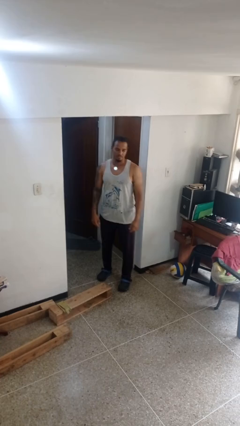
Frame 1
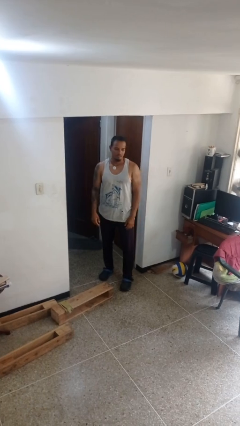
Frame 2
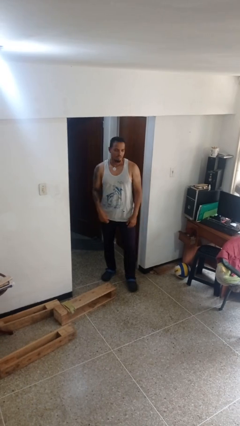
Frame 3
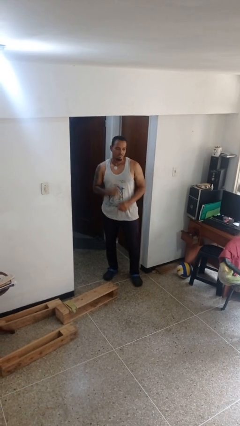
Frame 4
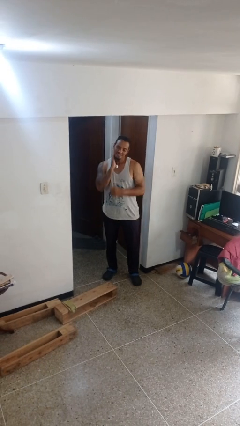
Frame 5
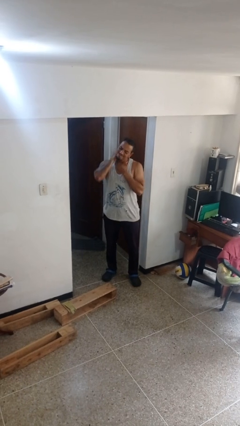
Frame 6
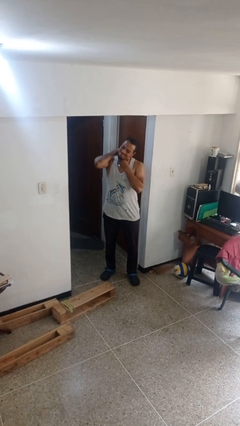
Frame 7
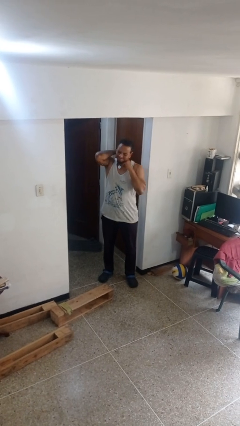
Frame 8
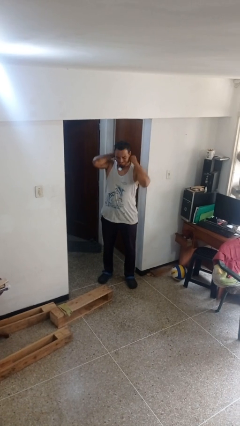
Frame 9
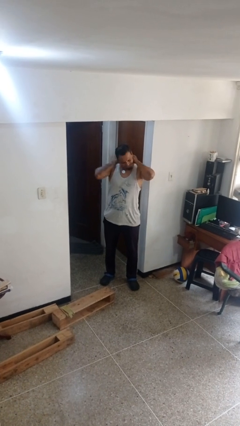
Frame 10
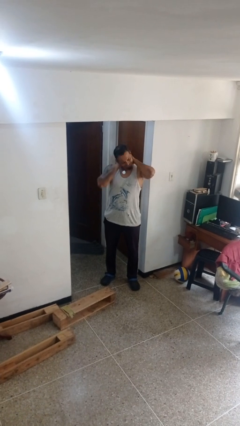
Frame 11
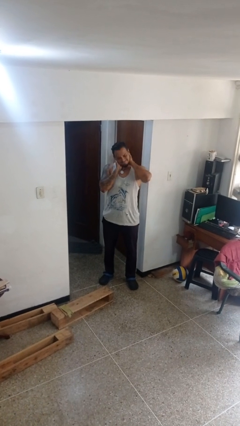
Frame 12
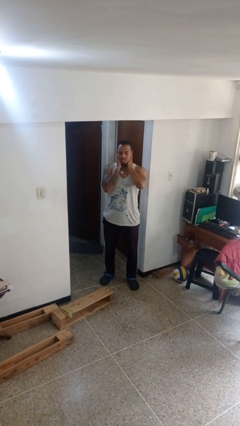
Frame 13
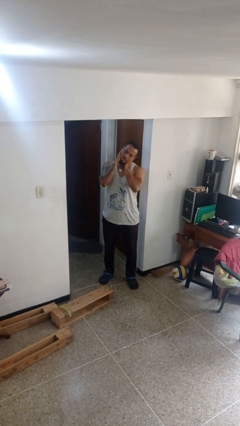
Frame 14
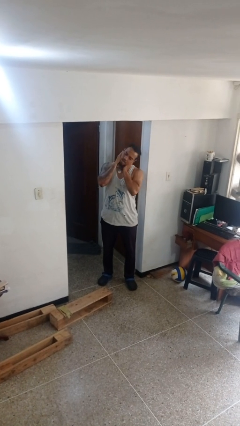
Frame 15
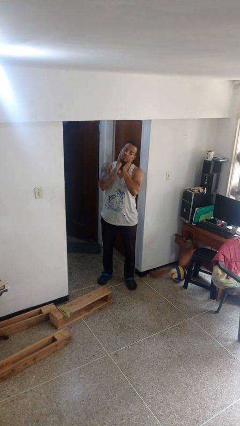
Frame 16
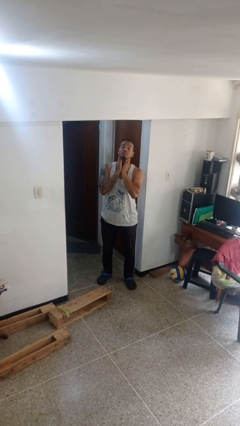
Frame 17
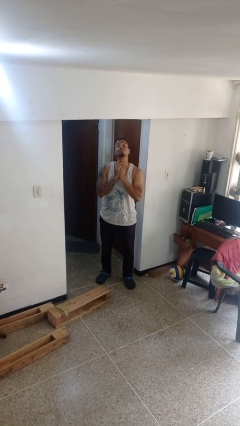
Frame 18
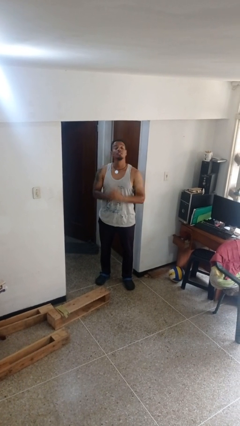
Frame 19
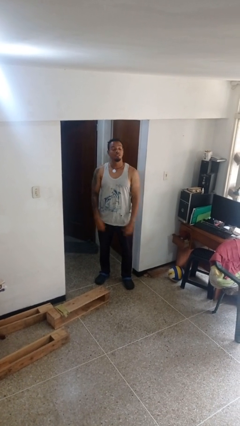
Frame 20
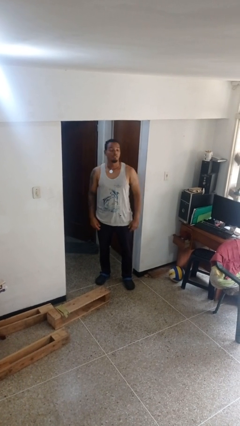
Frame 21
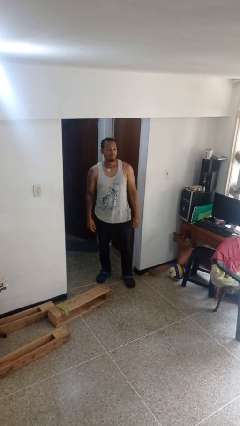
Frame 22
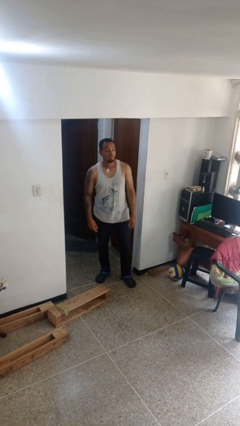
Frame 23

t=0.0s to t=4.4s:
person rubs neck

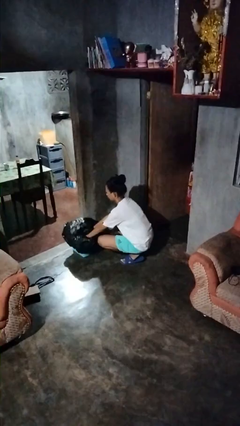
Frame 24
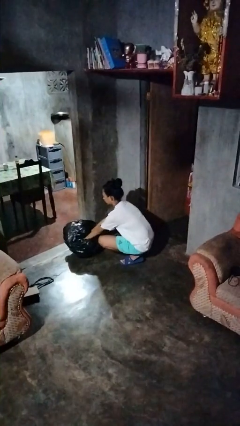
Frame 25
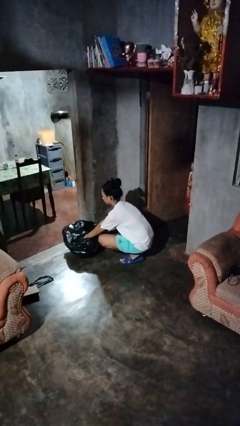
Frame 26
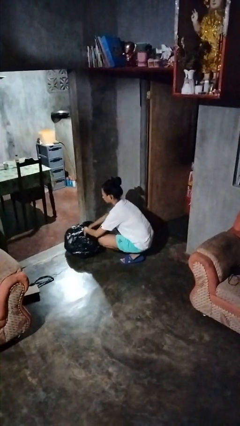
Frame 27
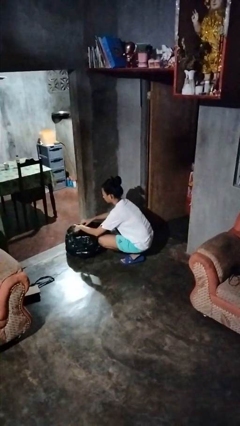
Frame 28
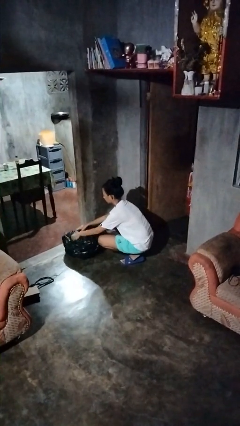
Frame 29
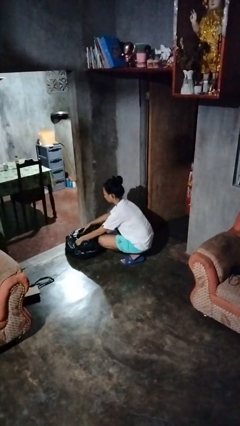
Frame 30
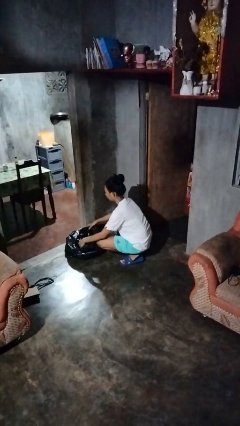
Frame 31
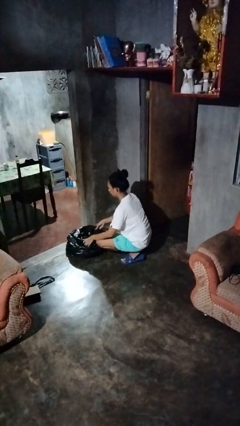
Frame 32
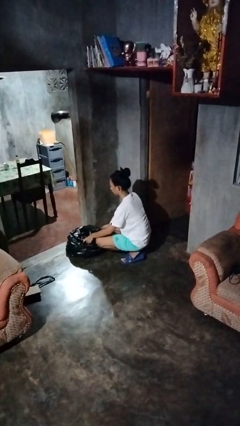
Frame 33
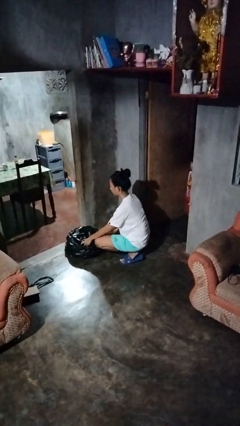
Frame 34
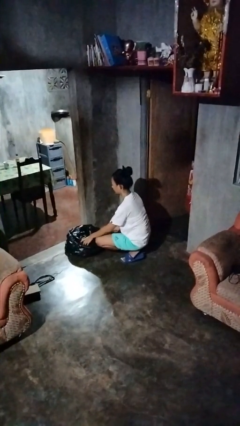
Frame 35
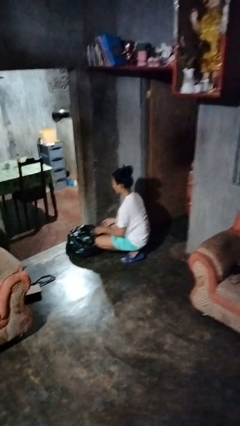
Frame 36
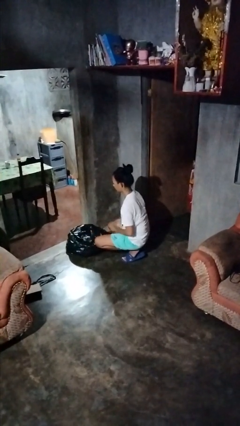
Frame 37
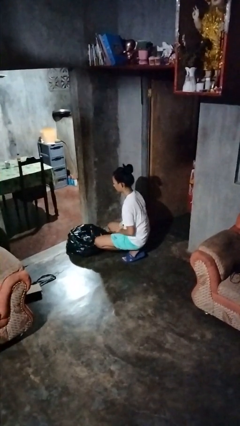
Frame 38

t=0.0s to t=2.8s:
person inserts trashbag into trashcan

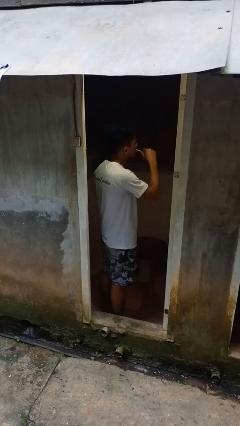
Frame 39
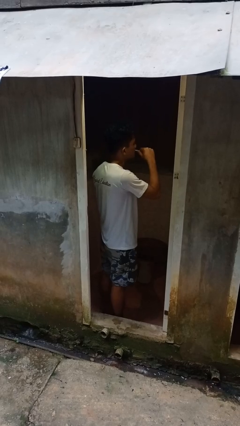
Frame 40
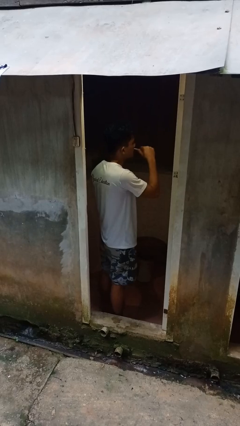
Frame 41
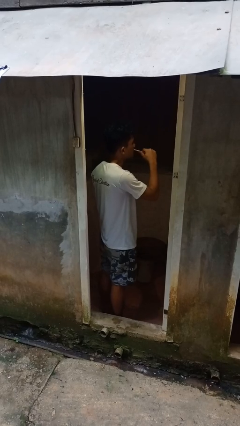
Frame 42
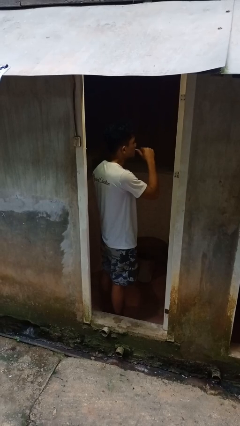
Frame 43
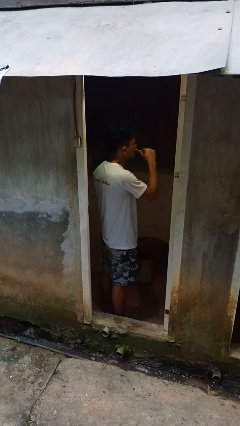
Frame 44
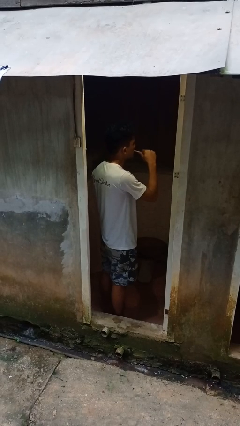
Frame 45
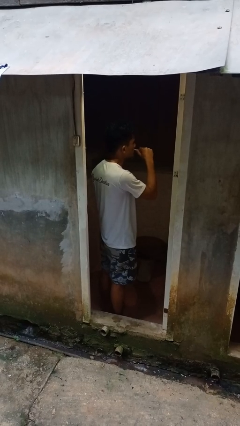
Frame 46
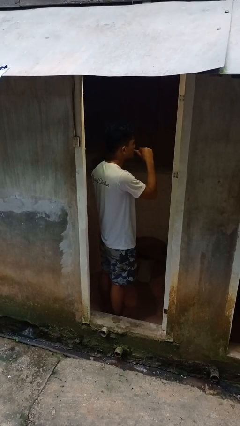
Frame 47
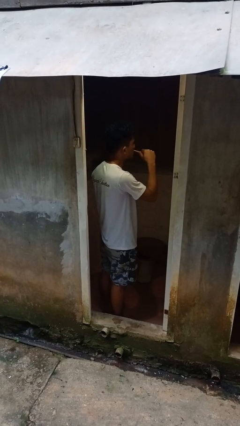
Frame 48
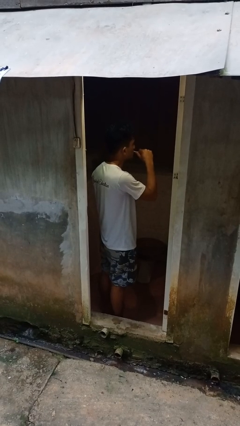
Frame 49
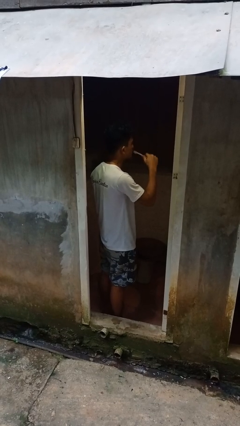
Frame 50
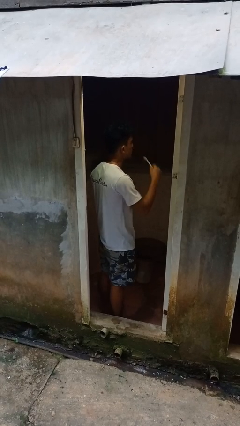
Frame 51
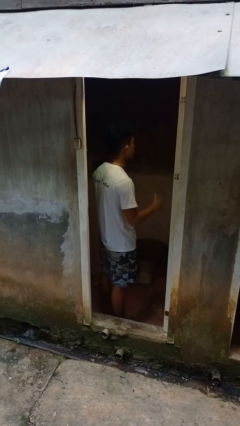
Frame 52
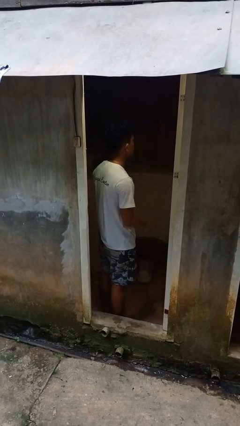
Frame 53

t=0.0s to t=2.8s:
person brushes teeth

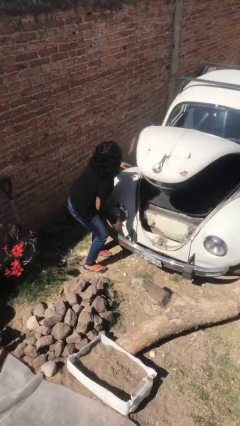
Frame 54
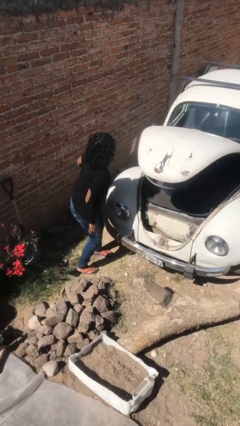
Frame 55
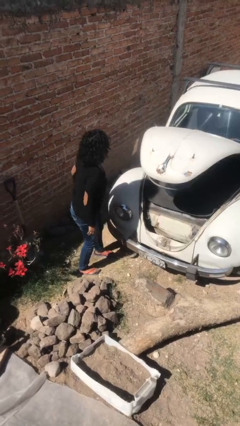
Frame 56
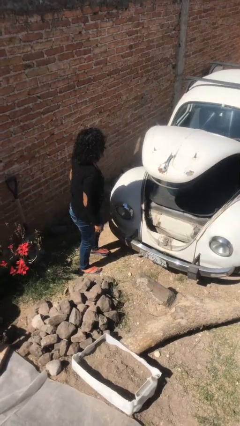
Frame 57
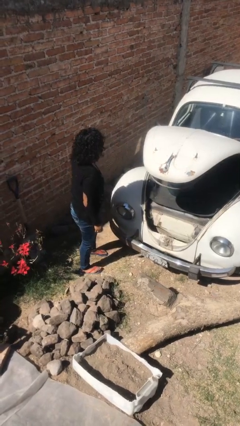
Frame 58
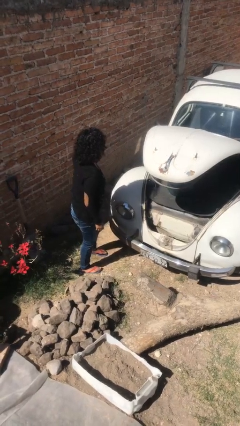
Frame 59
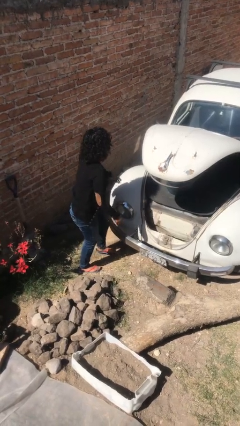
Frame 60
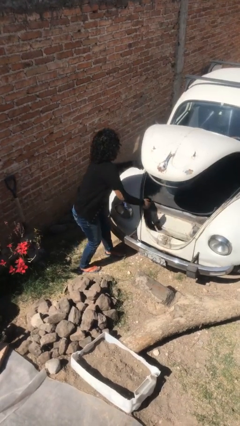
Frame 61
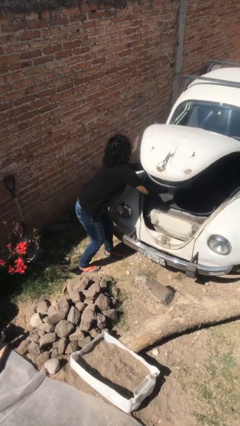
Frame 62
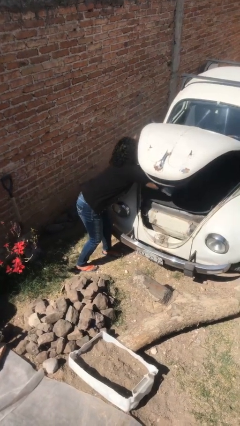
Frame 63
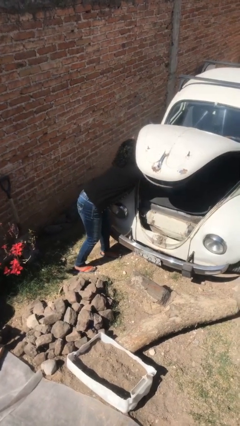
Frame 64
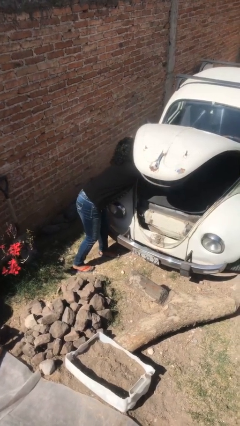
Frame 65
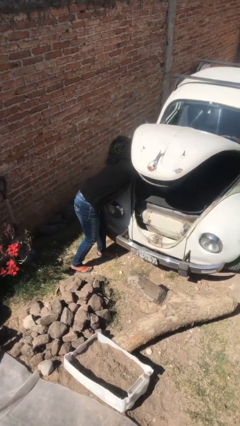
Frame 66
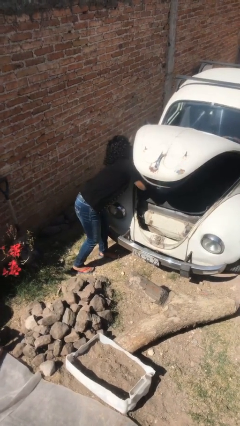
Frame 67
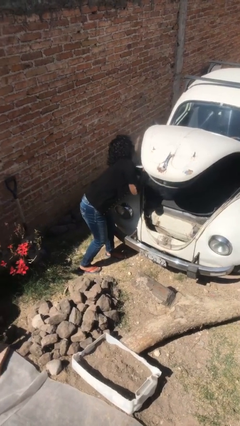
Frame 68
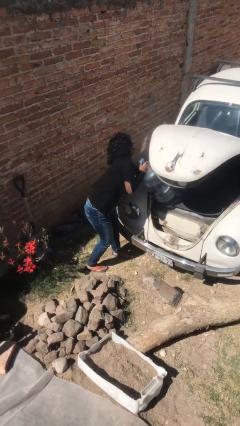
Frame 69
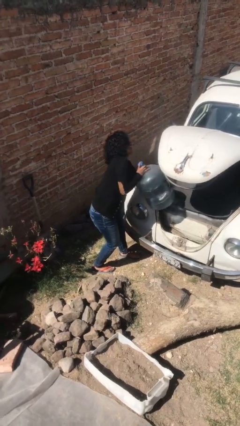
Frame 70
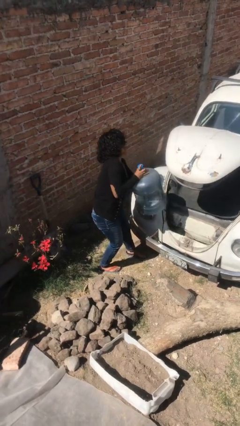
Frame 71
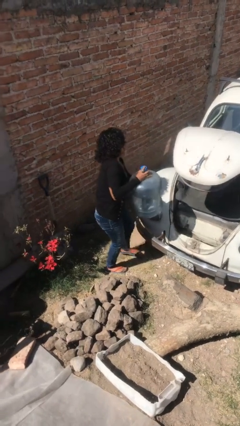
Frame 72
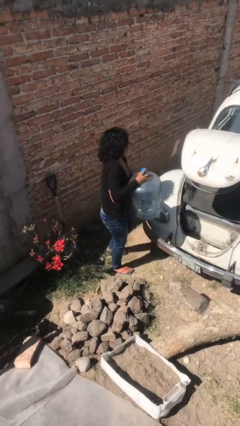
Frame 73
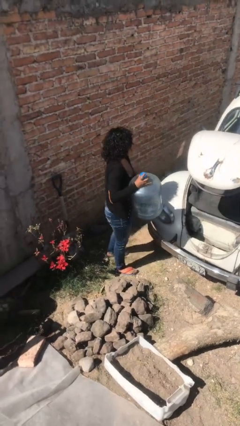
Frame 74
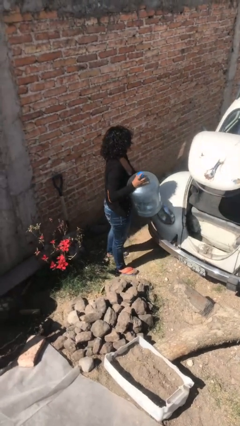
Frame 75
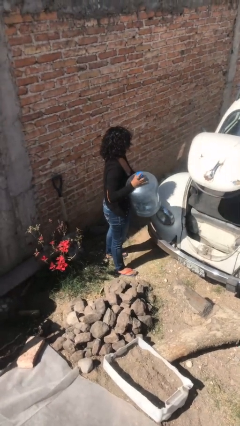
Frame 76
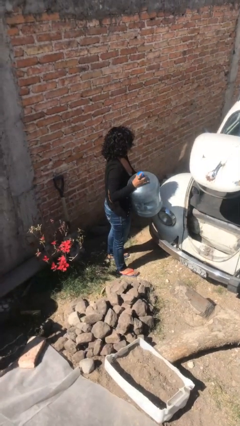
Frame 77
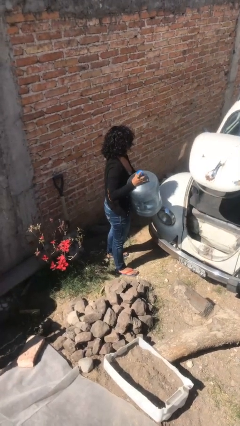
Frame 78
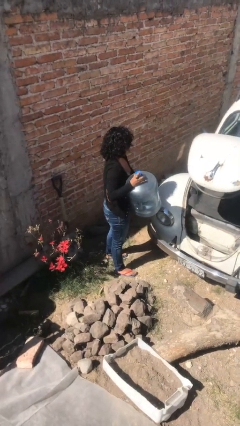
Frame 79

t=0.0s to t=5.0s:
person unloads car

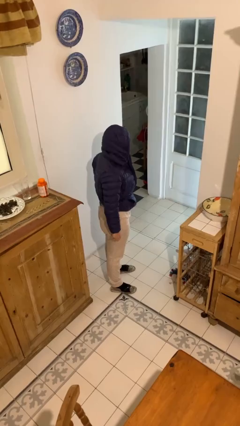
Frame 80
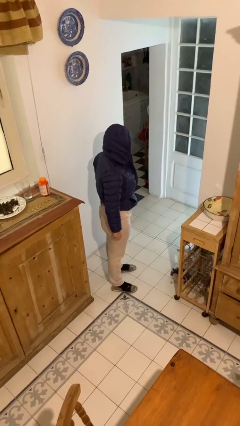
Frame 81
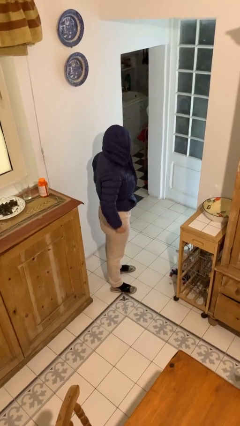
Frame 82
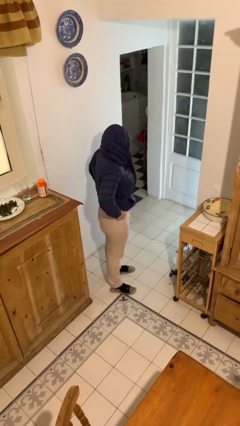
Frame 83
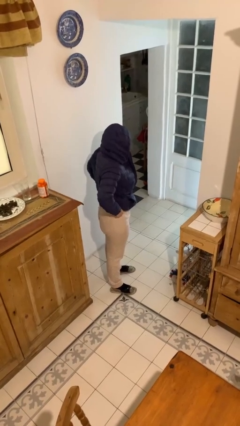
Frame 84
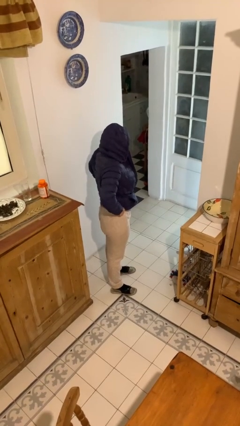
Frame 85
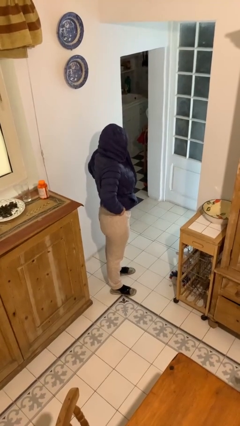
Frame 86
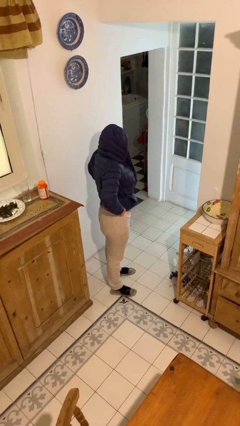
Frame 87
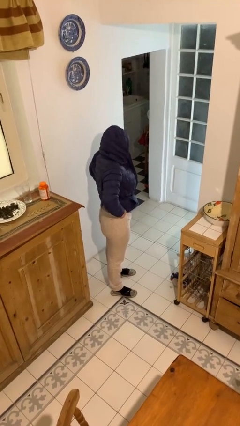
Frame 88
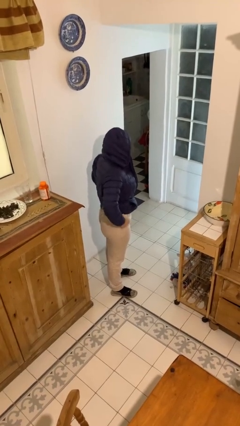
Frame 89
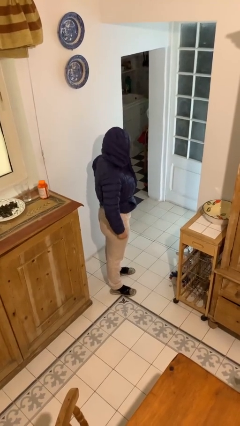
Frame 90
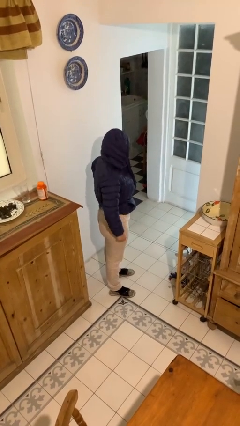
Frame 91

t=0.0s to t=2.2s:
person hikes up pants

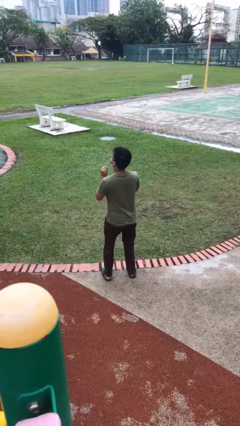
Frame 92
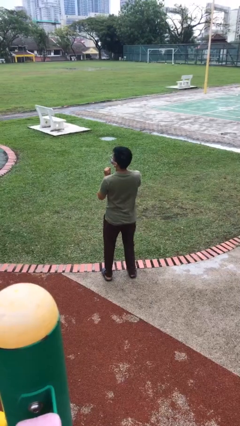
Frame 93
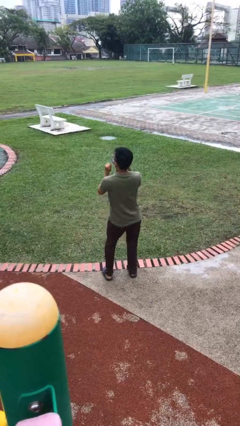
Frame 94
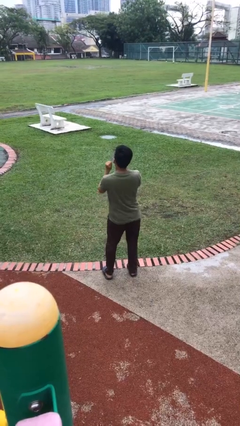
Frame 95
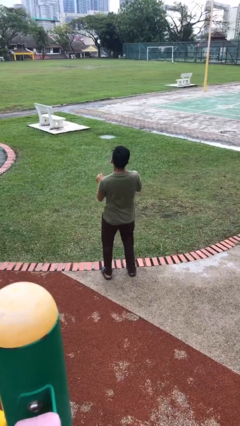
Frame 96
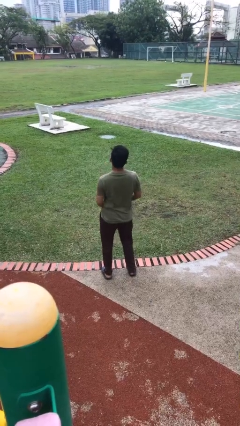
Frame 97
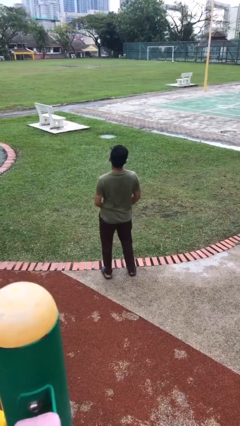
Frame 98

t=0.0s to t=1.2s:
person wiggles hips
